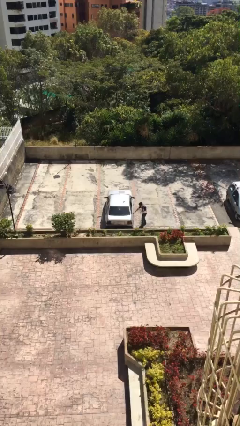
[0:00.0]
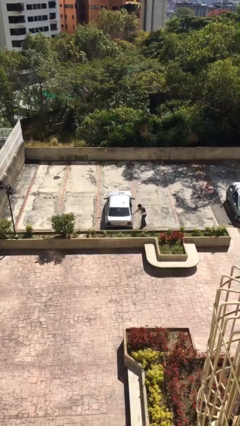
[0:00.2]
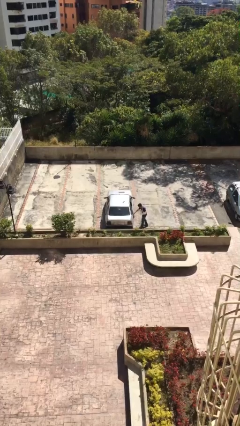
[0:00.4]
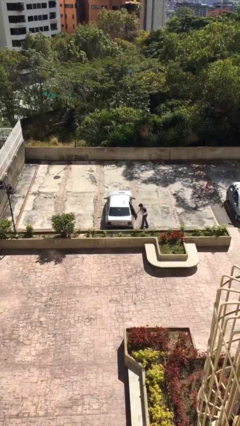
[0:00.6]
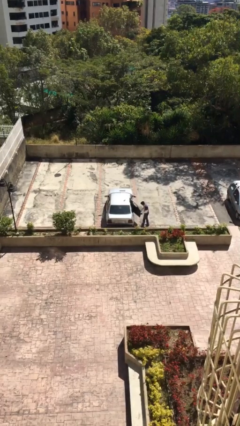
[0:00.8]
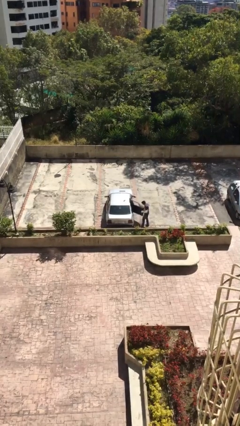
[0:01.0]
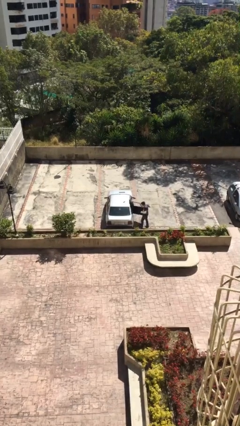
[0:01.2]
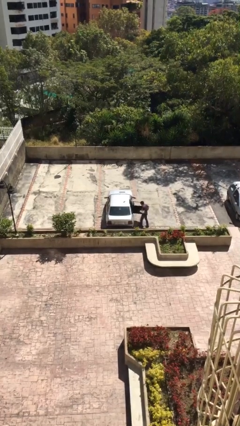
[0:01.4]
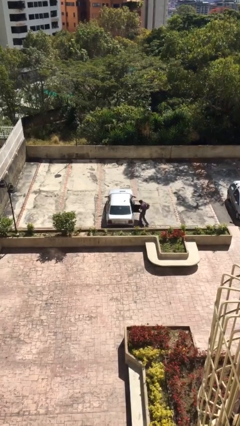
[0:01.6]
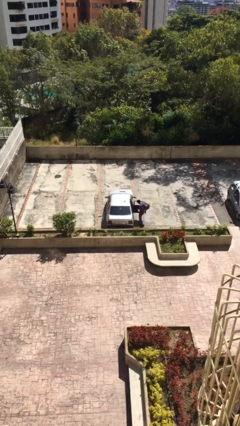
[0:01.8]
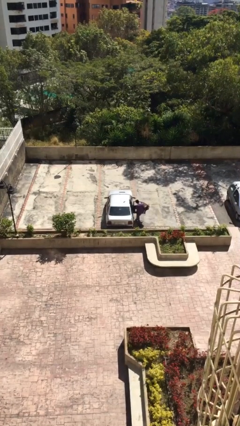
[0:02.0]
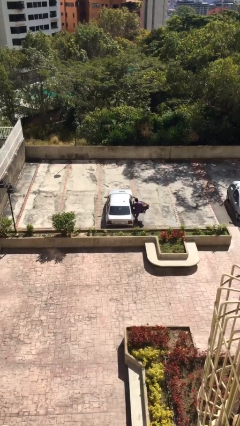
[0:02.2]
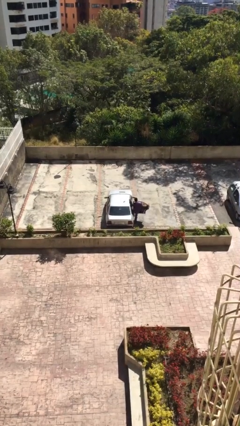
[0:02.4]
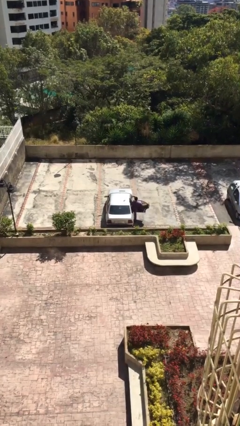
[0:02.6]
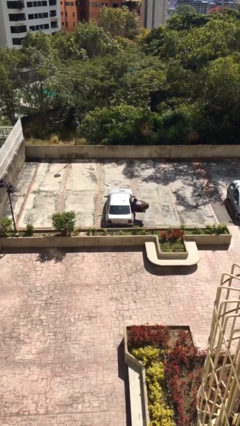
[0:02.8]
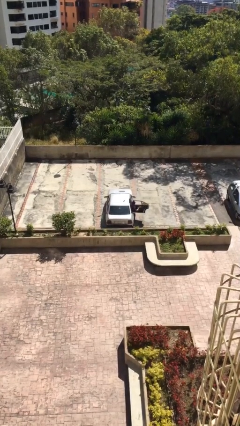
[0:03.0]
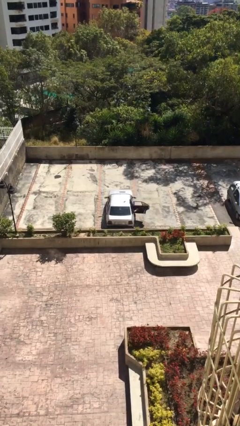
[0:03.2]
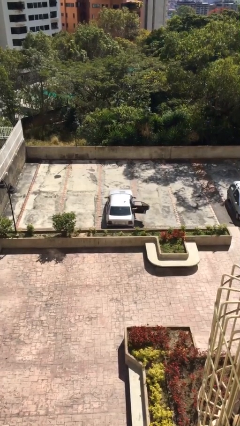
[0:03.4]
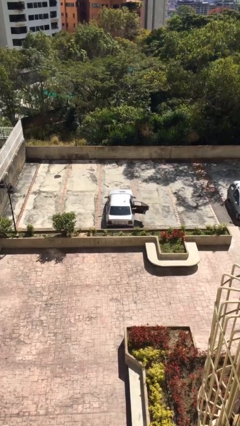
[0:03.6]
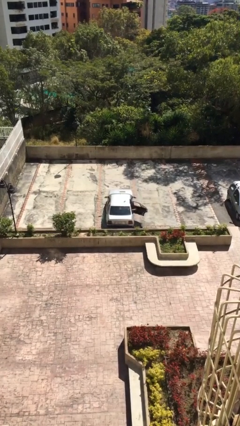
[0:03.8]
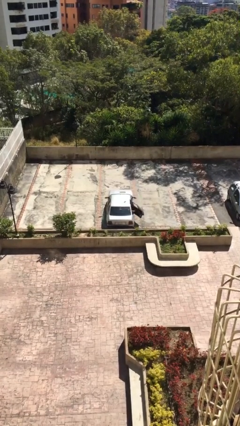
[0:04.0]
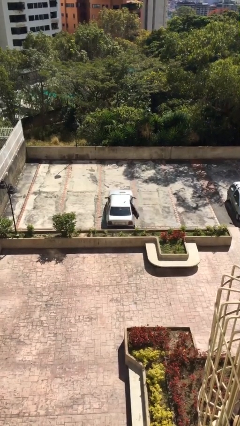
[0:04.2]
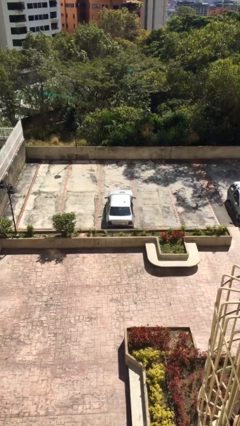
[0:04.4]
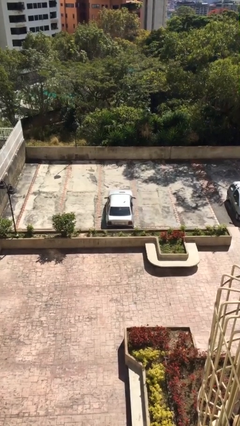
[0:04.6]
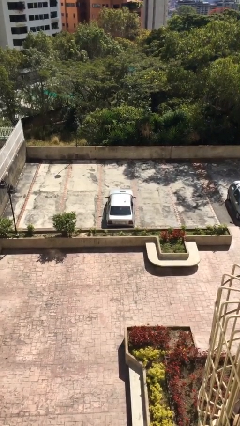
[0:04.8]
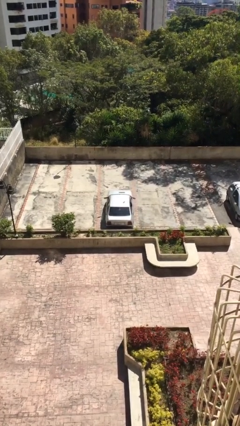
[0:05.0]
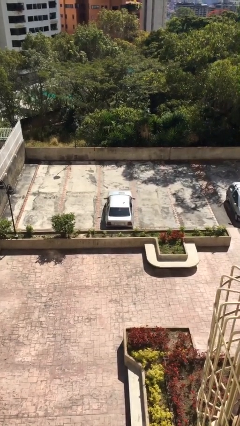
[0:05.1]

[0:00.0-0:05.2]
car picks up person

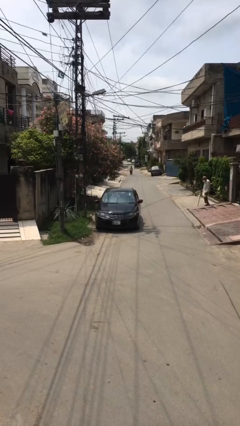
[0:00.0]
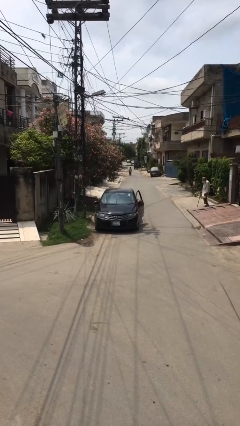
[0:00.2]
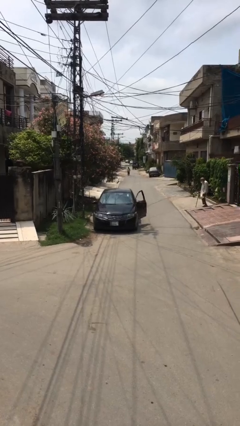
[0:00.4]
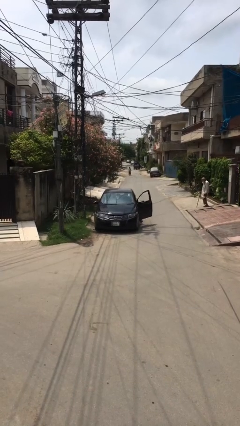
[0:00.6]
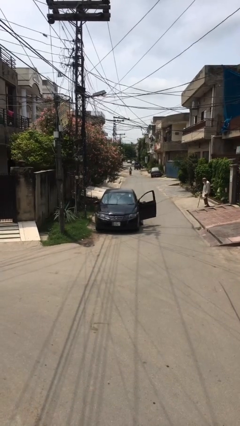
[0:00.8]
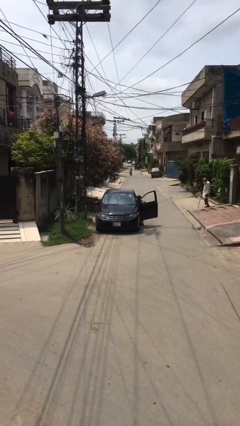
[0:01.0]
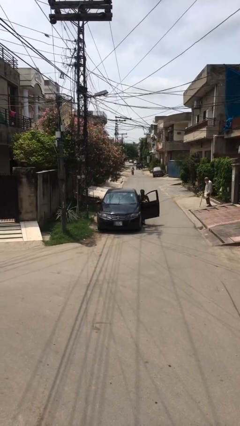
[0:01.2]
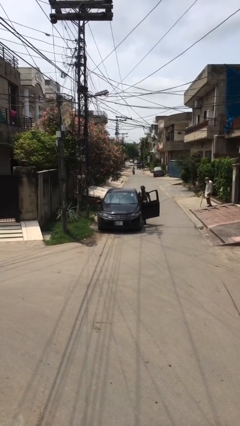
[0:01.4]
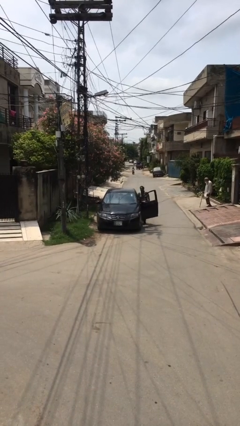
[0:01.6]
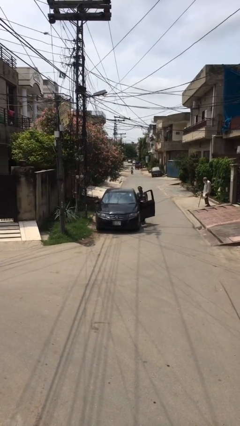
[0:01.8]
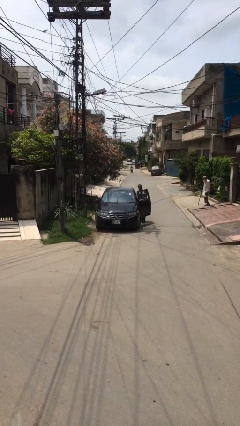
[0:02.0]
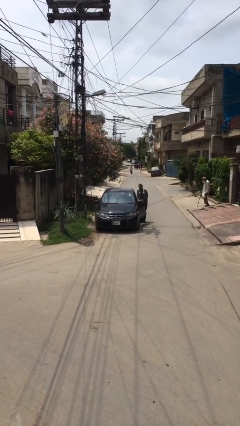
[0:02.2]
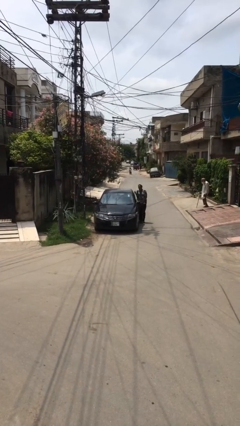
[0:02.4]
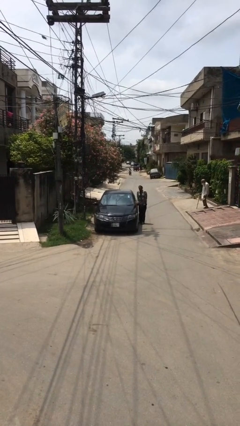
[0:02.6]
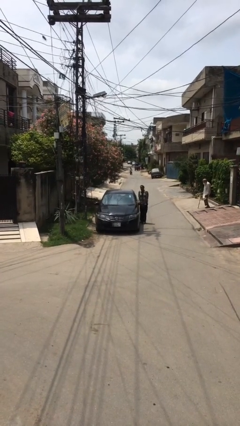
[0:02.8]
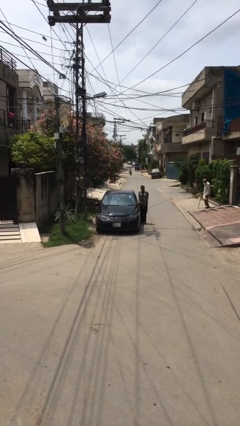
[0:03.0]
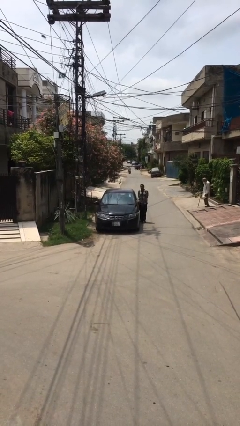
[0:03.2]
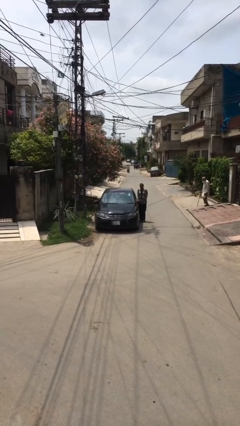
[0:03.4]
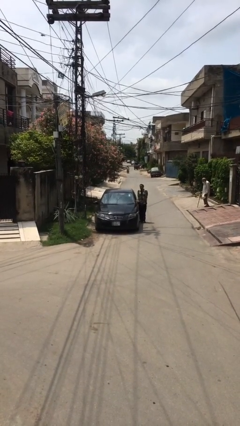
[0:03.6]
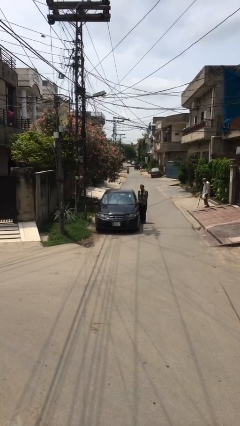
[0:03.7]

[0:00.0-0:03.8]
car drops off person

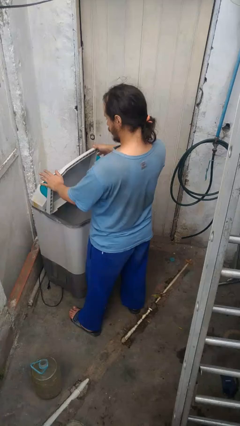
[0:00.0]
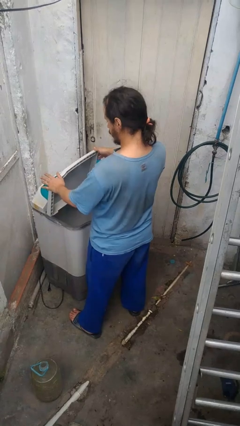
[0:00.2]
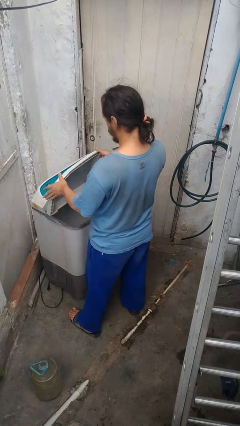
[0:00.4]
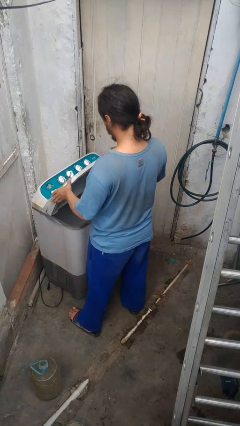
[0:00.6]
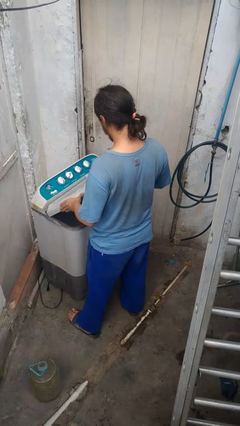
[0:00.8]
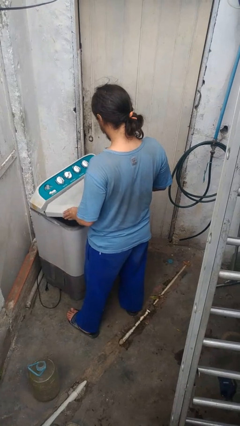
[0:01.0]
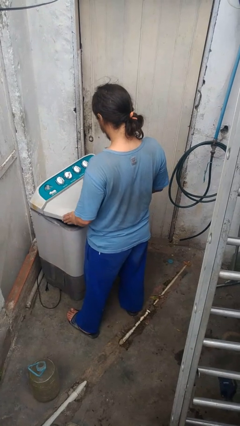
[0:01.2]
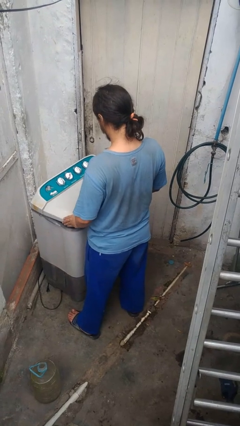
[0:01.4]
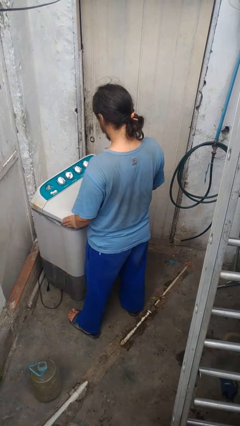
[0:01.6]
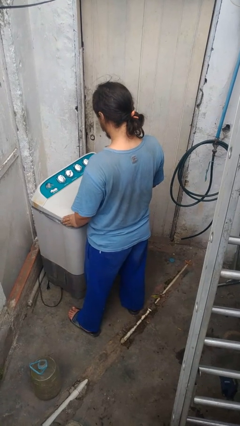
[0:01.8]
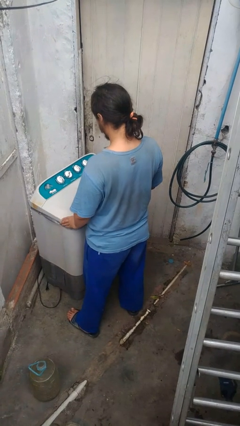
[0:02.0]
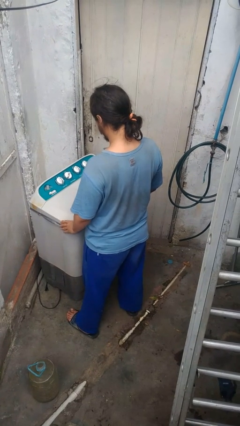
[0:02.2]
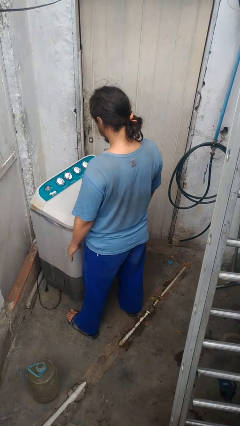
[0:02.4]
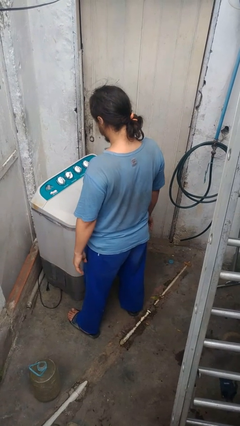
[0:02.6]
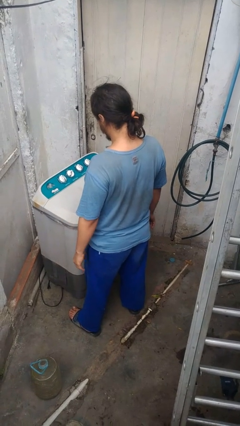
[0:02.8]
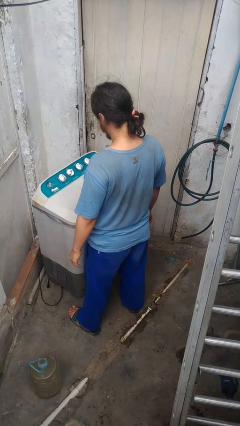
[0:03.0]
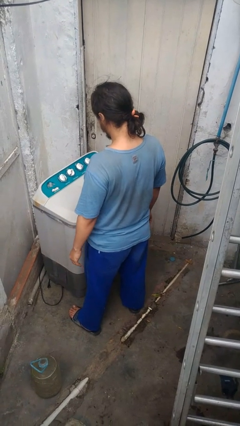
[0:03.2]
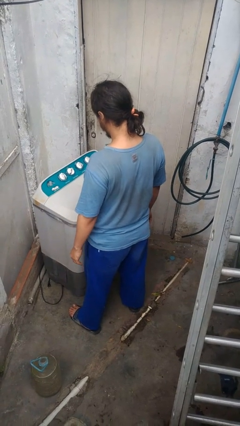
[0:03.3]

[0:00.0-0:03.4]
person closes clothes washer

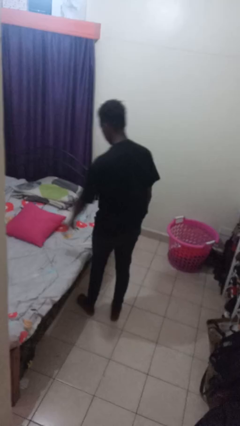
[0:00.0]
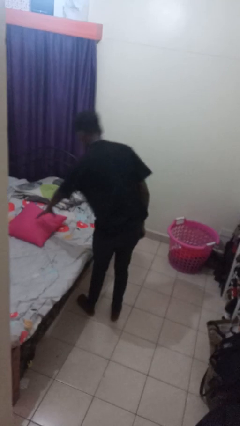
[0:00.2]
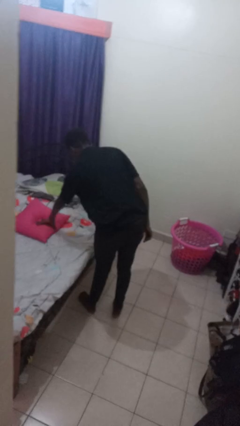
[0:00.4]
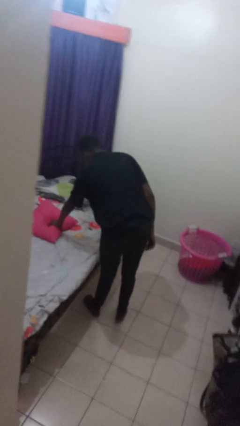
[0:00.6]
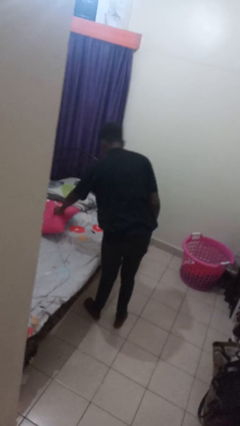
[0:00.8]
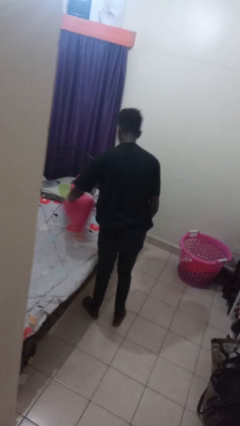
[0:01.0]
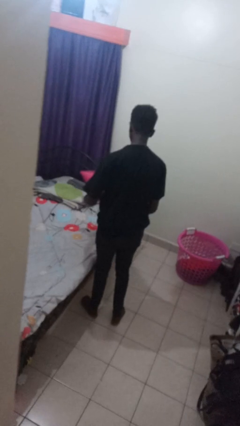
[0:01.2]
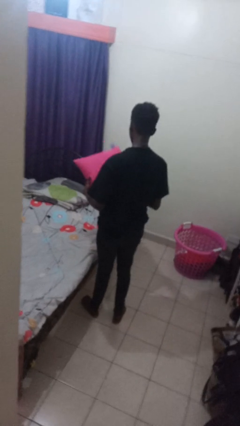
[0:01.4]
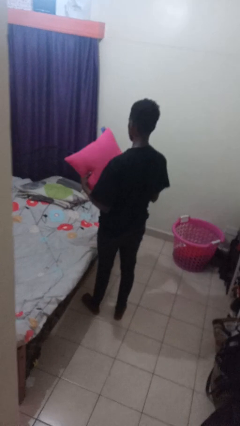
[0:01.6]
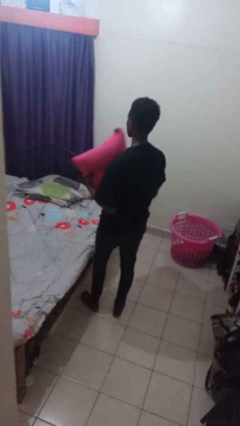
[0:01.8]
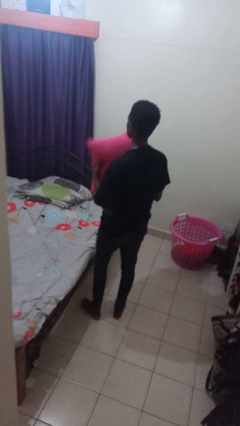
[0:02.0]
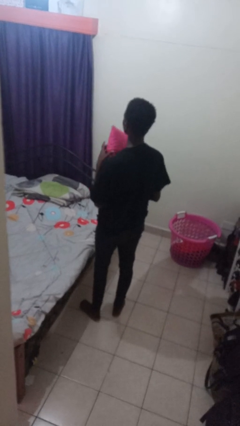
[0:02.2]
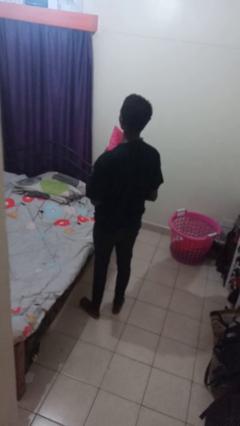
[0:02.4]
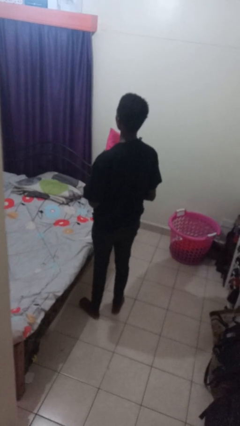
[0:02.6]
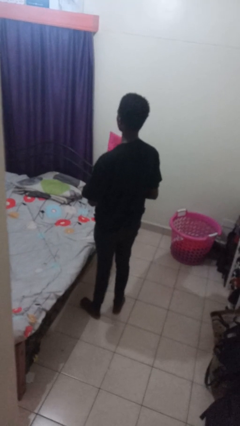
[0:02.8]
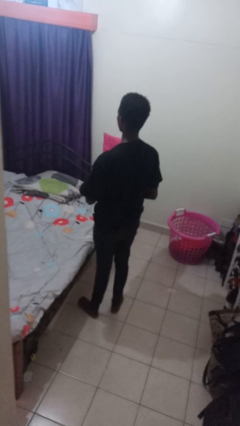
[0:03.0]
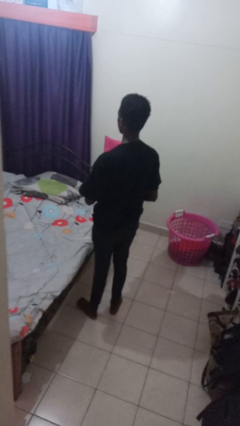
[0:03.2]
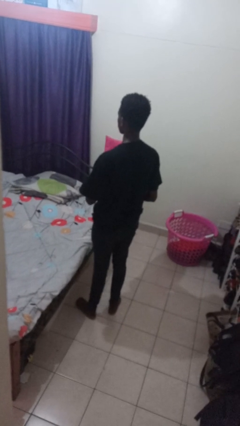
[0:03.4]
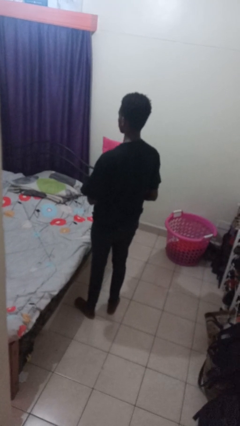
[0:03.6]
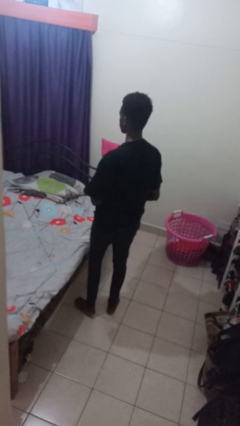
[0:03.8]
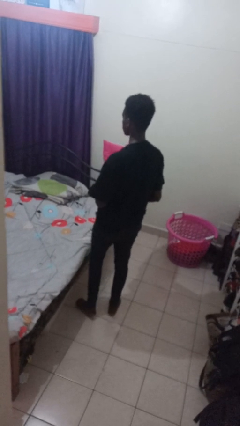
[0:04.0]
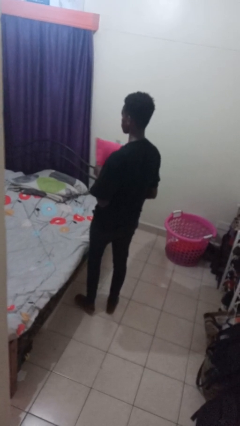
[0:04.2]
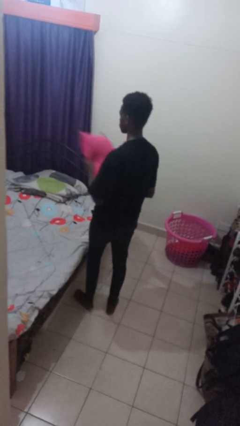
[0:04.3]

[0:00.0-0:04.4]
person picks up object from bed

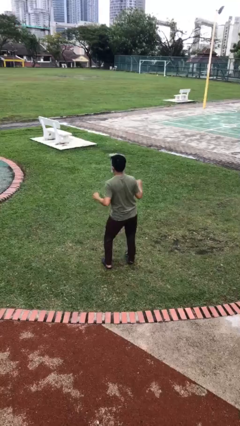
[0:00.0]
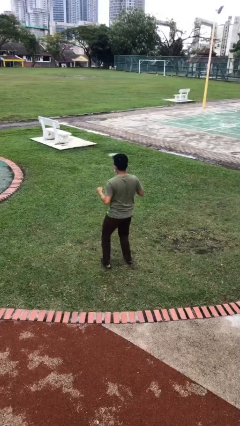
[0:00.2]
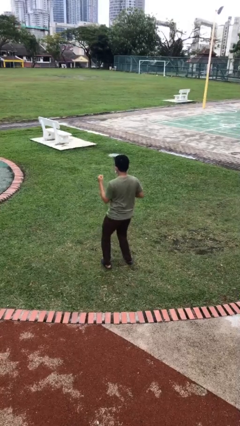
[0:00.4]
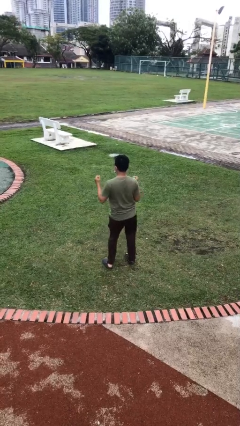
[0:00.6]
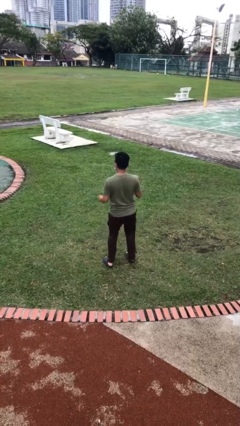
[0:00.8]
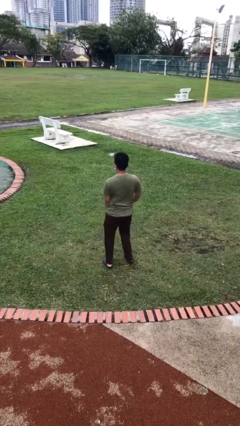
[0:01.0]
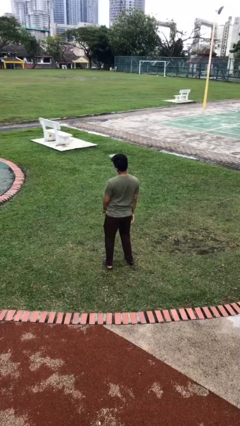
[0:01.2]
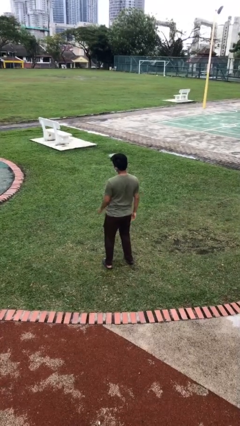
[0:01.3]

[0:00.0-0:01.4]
person dances in place
